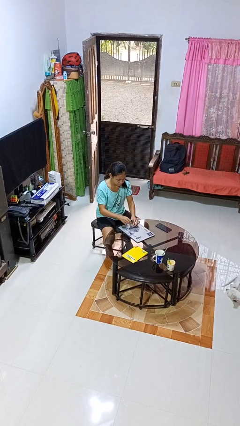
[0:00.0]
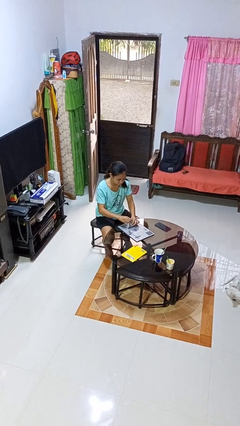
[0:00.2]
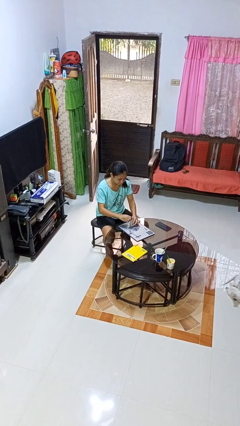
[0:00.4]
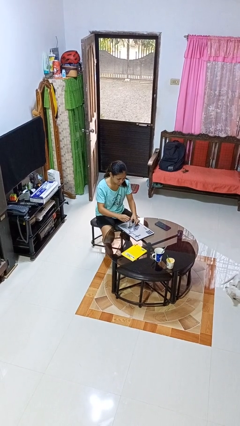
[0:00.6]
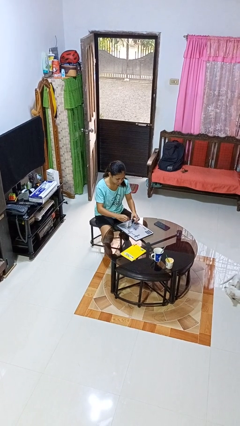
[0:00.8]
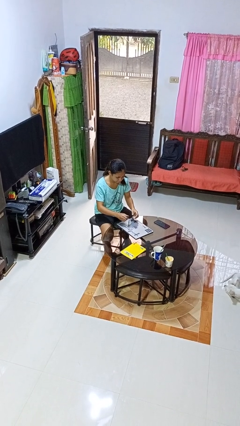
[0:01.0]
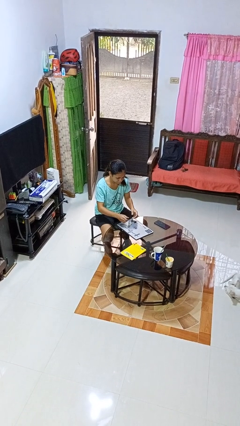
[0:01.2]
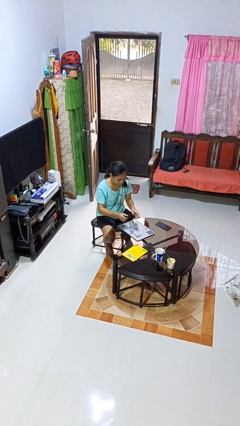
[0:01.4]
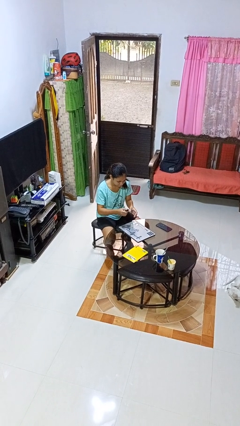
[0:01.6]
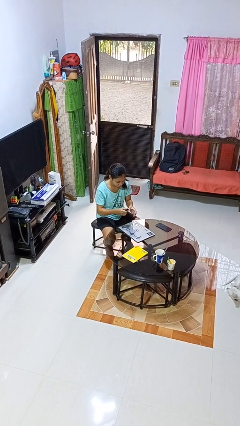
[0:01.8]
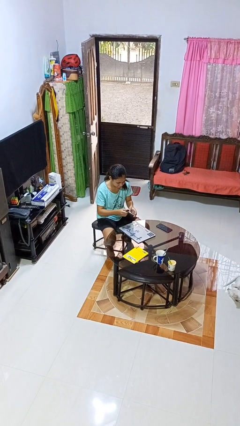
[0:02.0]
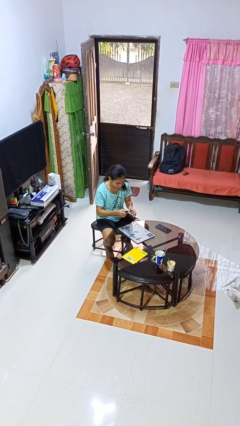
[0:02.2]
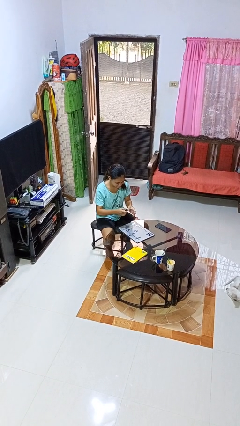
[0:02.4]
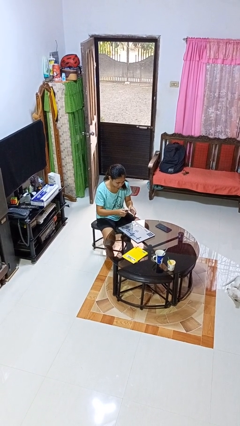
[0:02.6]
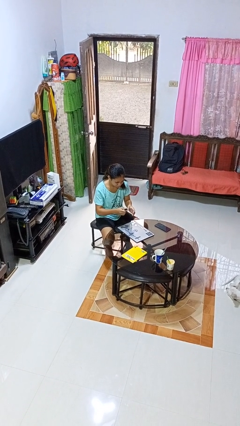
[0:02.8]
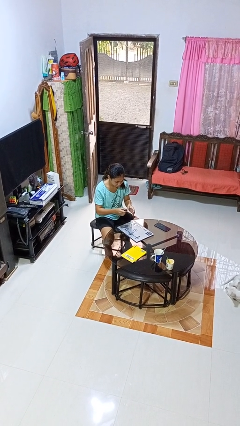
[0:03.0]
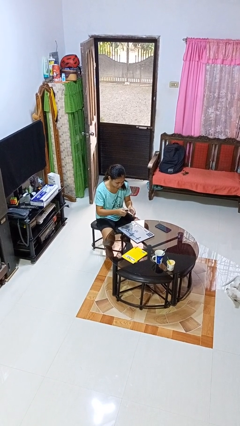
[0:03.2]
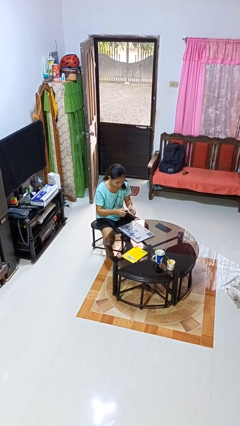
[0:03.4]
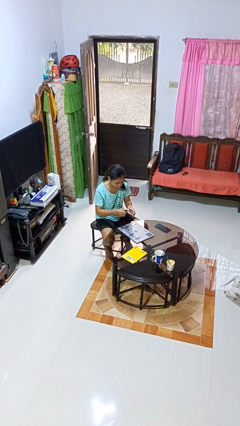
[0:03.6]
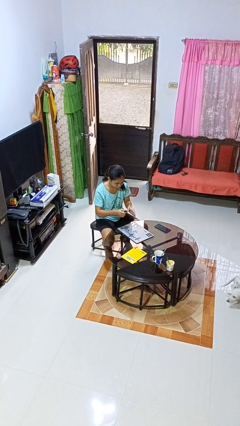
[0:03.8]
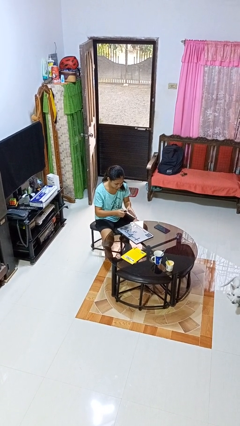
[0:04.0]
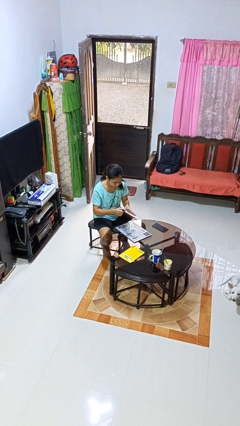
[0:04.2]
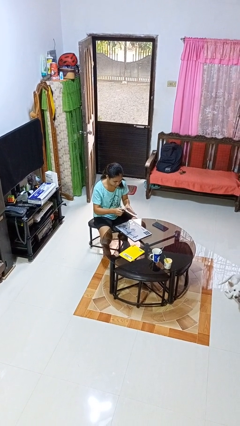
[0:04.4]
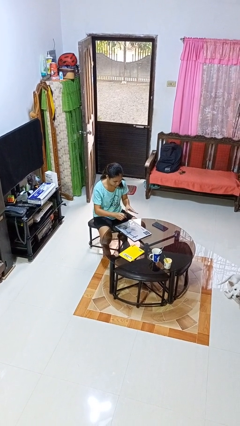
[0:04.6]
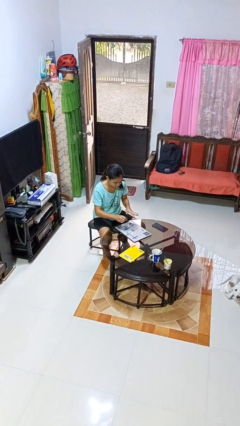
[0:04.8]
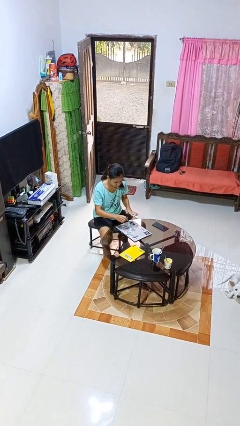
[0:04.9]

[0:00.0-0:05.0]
person paints fingernails

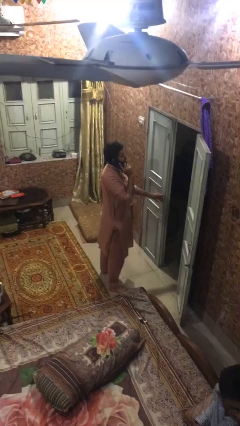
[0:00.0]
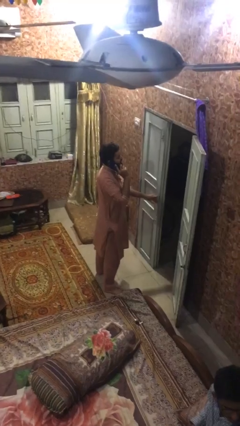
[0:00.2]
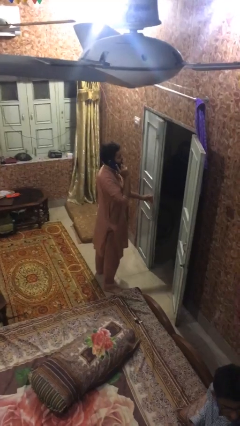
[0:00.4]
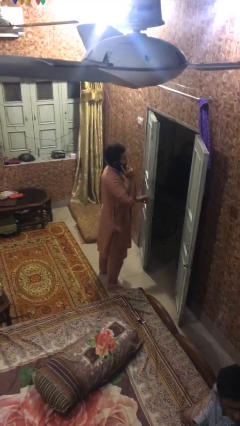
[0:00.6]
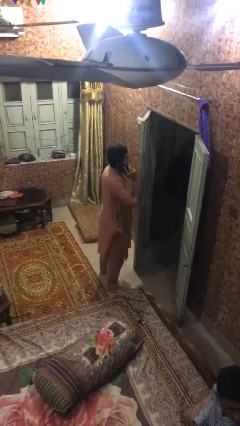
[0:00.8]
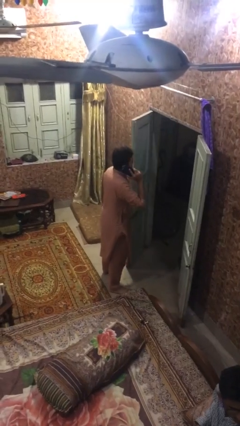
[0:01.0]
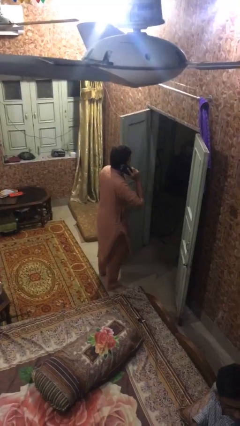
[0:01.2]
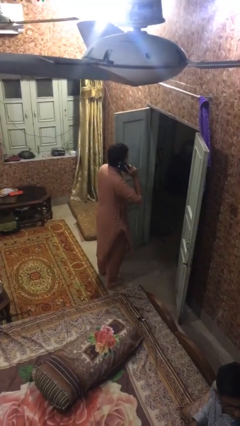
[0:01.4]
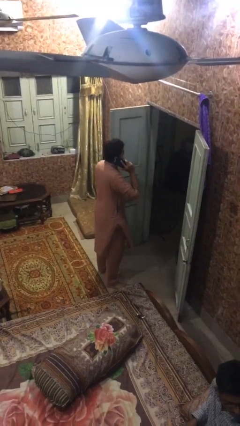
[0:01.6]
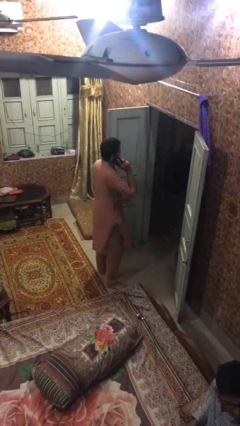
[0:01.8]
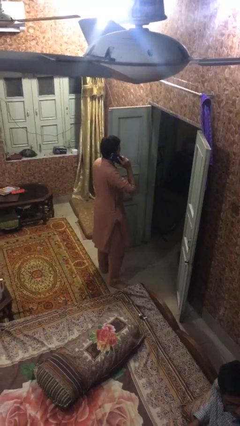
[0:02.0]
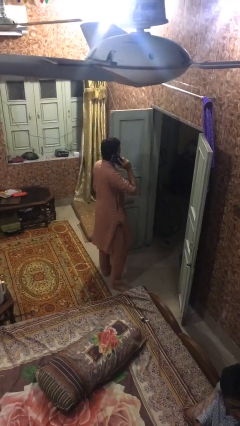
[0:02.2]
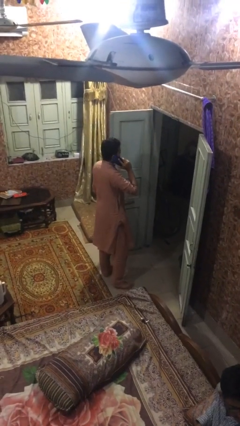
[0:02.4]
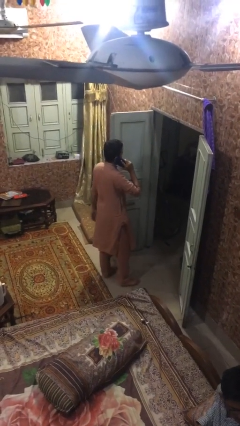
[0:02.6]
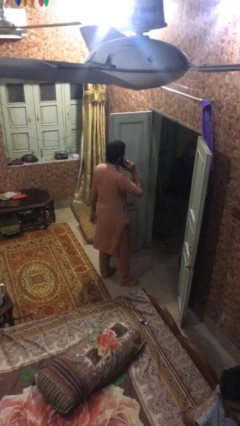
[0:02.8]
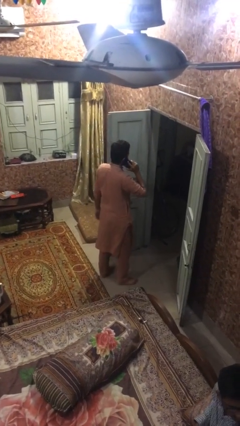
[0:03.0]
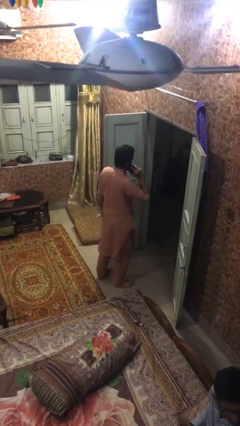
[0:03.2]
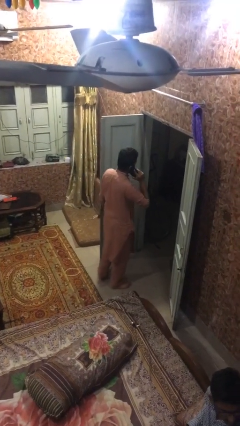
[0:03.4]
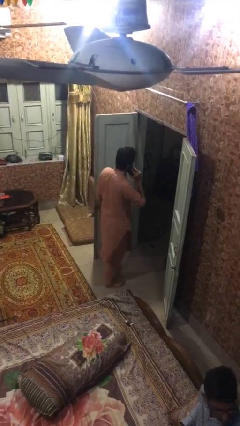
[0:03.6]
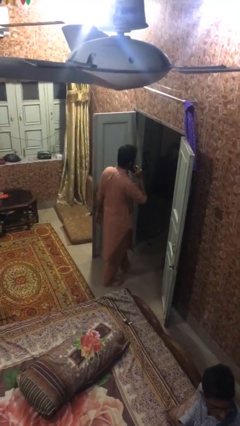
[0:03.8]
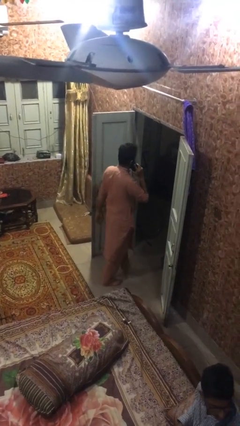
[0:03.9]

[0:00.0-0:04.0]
person opens facility door

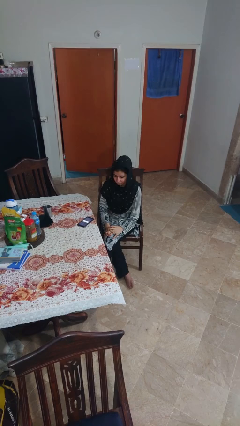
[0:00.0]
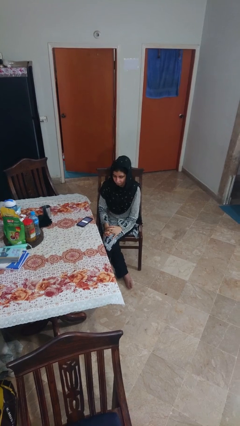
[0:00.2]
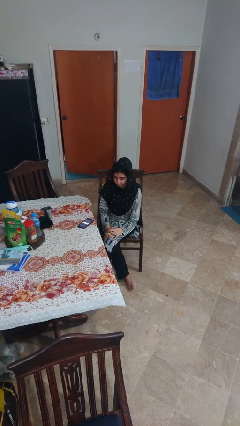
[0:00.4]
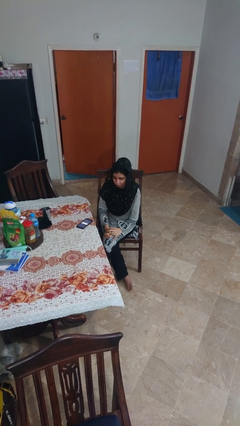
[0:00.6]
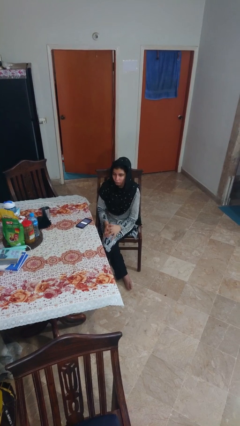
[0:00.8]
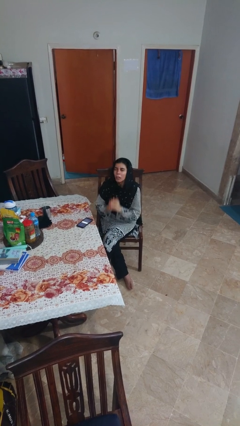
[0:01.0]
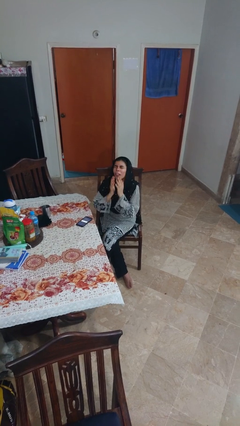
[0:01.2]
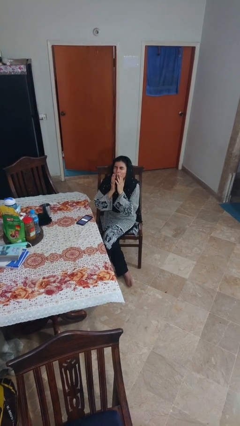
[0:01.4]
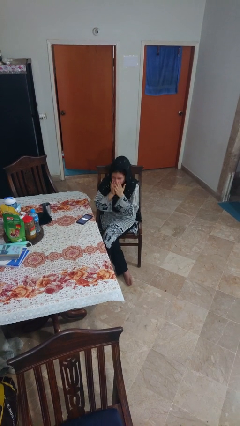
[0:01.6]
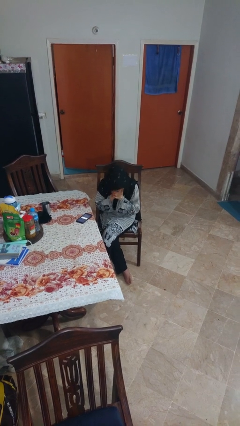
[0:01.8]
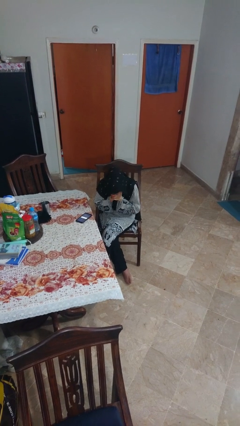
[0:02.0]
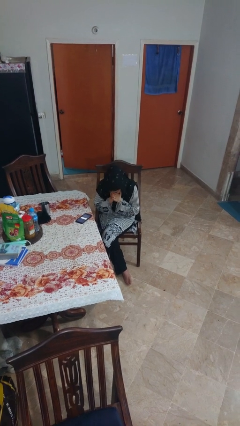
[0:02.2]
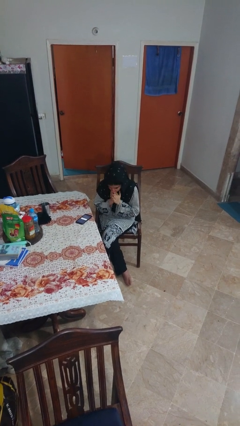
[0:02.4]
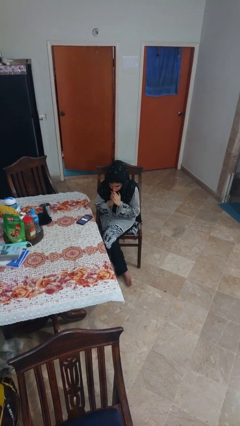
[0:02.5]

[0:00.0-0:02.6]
person sneezes into hand

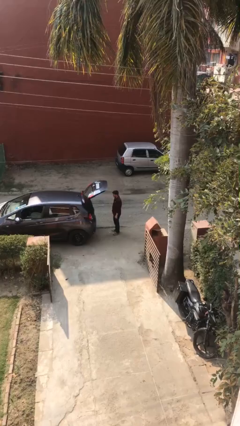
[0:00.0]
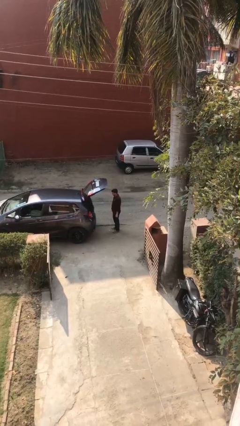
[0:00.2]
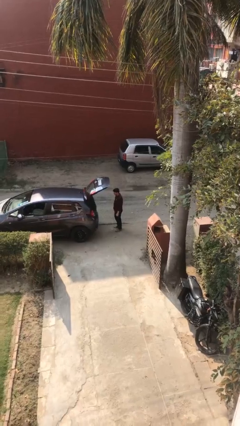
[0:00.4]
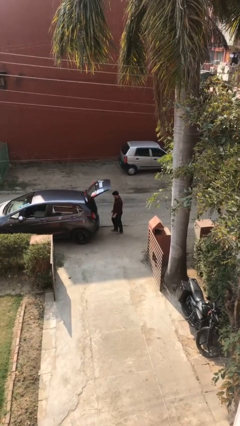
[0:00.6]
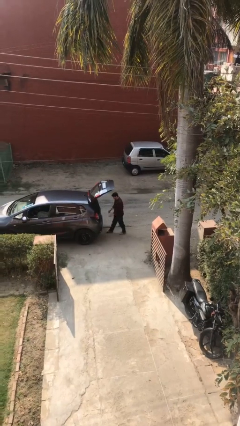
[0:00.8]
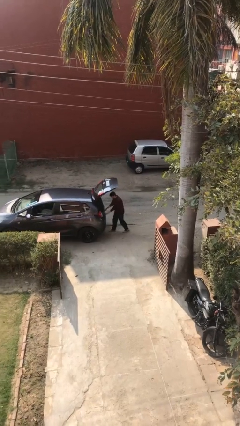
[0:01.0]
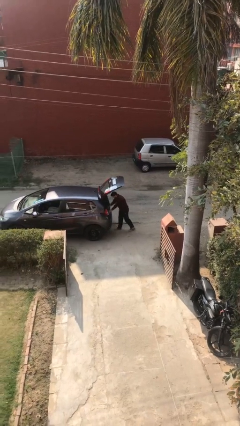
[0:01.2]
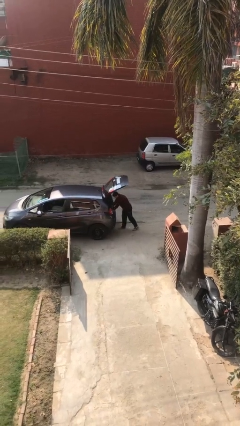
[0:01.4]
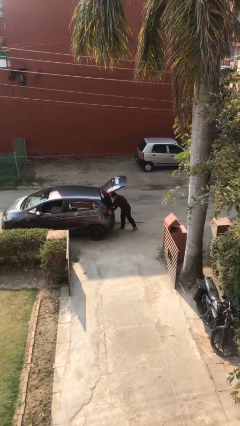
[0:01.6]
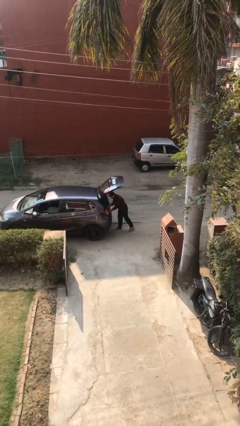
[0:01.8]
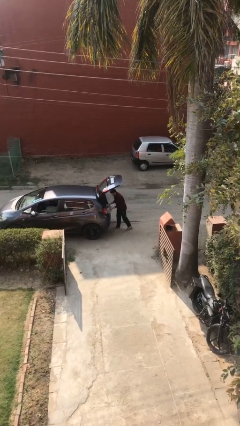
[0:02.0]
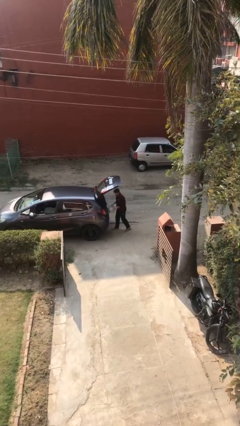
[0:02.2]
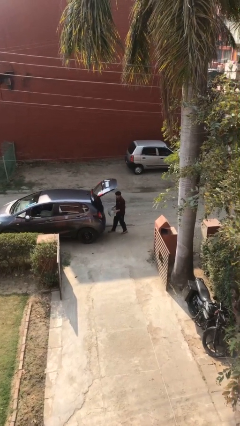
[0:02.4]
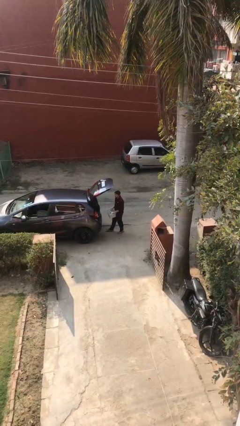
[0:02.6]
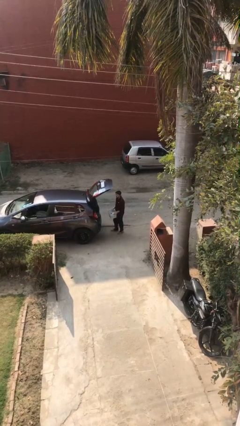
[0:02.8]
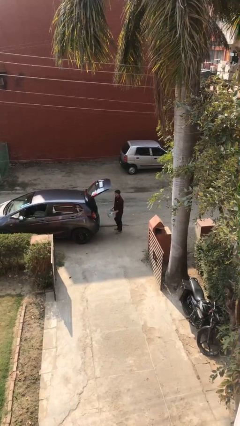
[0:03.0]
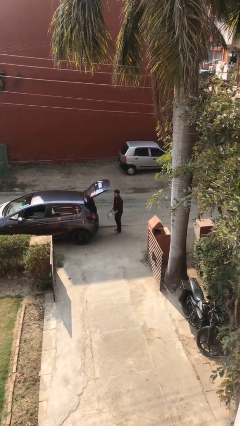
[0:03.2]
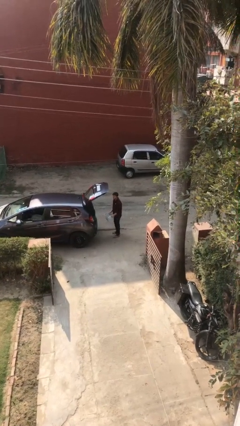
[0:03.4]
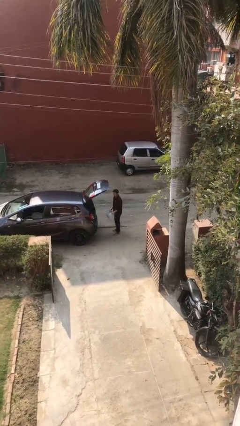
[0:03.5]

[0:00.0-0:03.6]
person unloads car

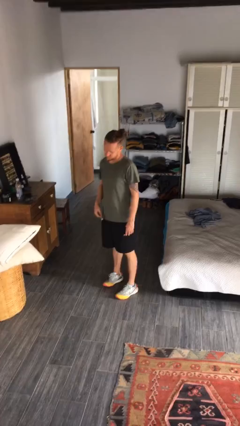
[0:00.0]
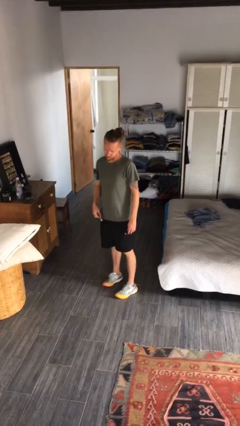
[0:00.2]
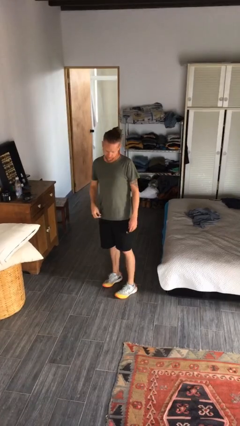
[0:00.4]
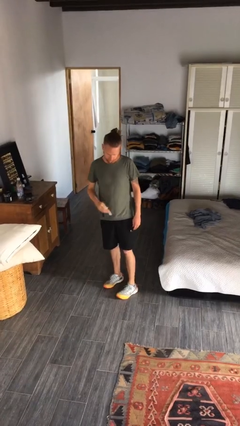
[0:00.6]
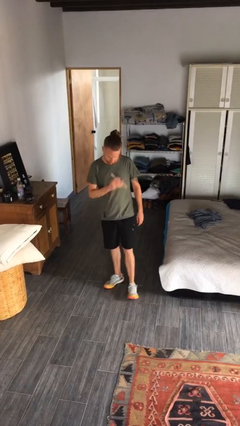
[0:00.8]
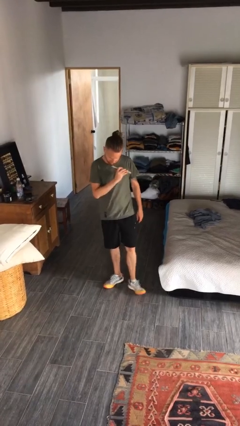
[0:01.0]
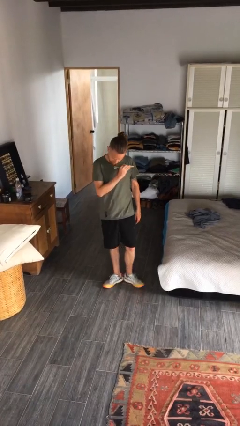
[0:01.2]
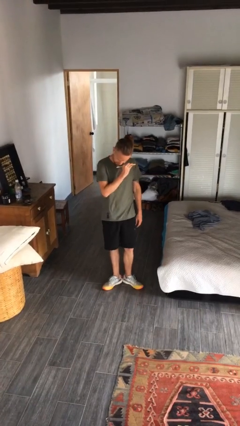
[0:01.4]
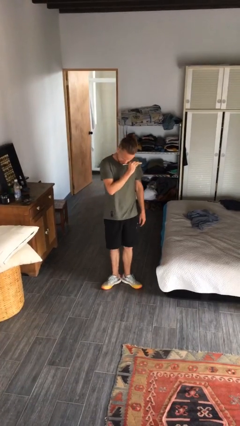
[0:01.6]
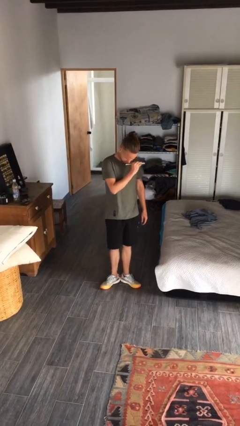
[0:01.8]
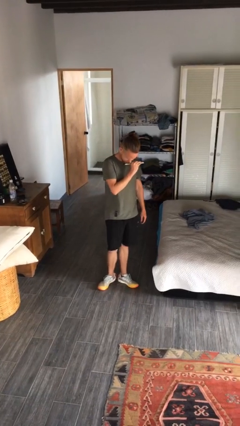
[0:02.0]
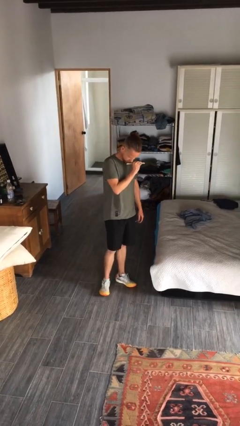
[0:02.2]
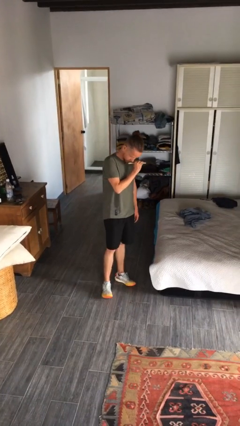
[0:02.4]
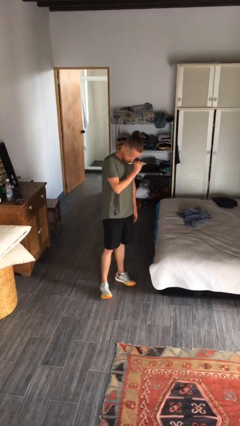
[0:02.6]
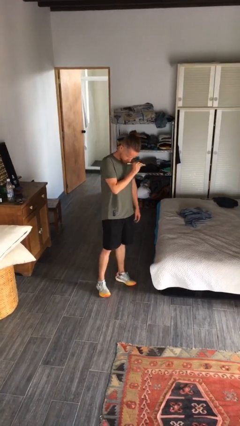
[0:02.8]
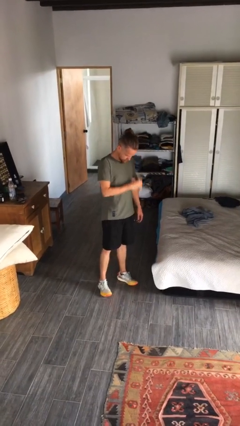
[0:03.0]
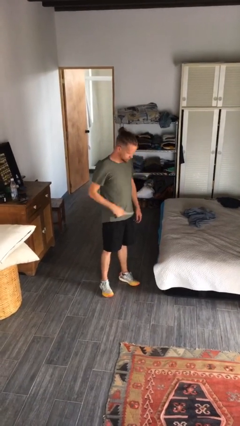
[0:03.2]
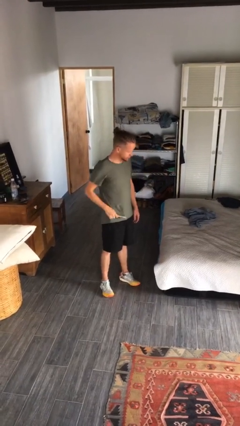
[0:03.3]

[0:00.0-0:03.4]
person brushes teeth
